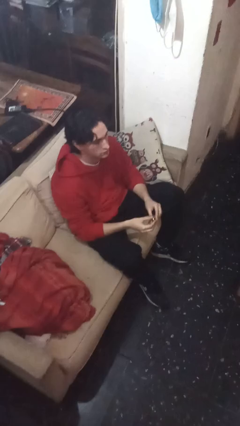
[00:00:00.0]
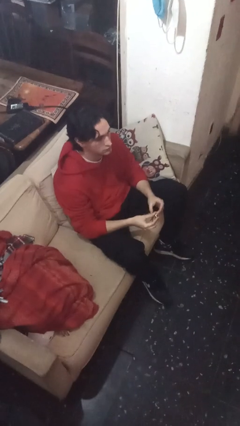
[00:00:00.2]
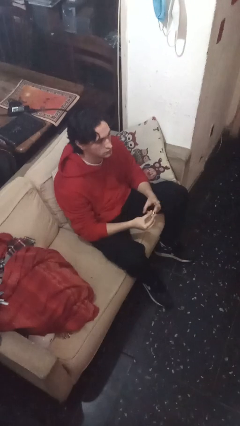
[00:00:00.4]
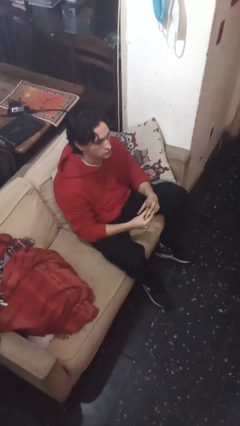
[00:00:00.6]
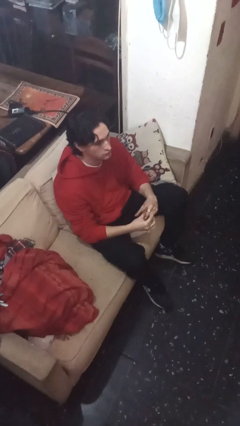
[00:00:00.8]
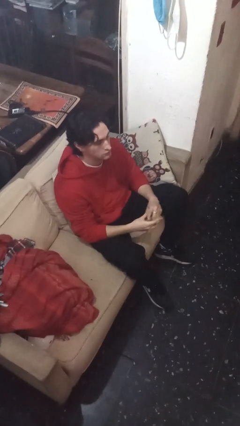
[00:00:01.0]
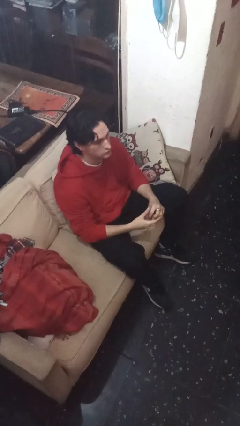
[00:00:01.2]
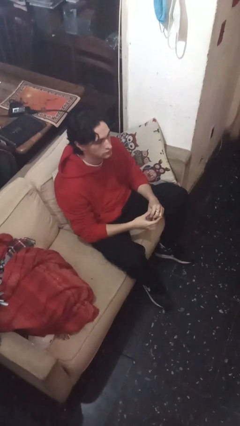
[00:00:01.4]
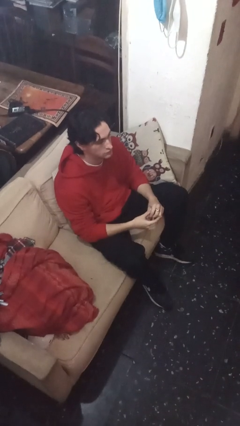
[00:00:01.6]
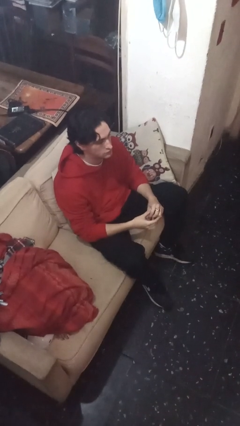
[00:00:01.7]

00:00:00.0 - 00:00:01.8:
person puts on ring

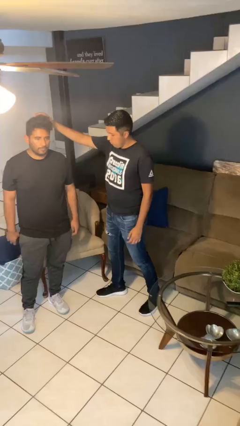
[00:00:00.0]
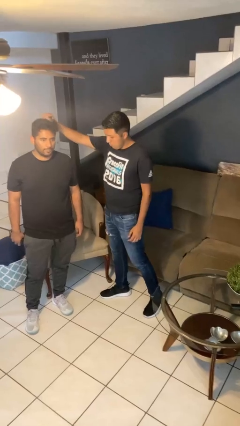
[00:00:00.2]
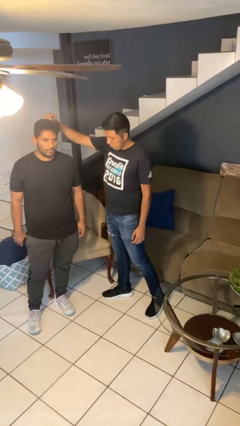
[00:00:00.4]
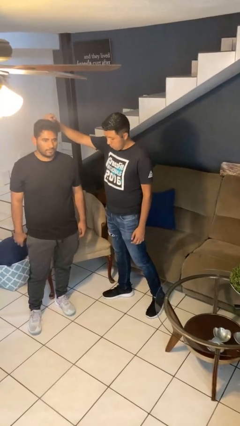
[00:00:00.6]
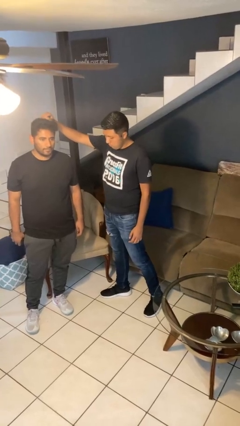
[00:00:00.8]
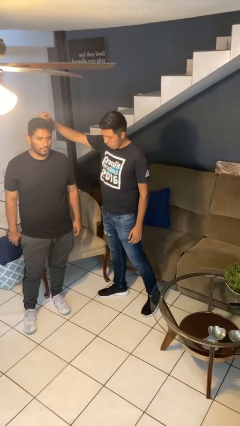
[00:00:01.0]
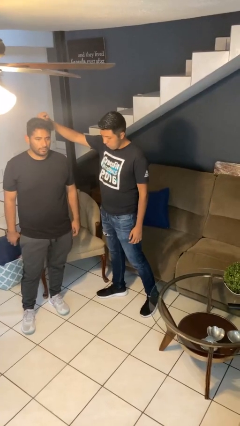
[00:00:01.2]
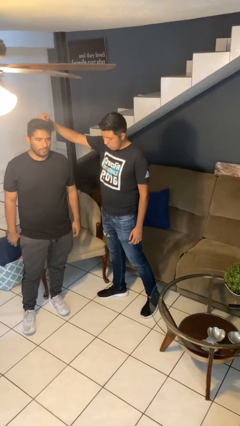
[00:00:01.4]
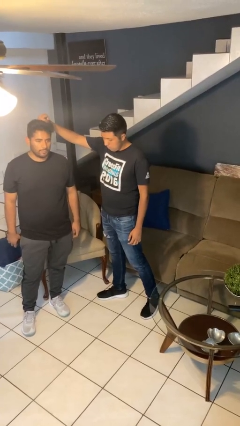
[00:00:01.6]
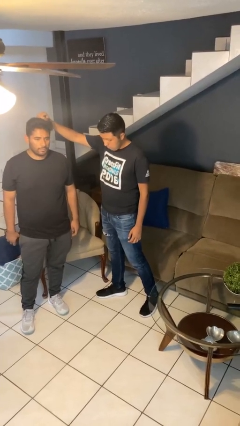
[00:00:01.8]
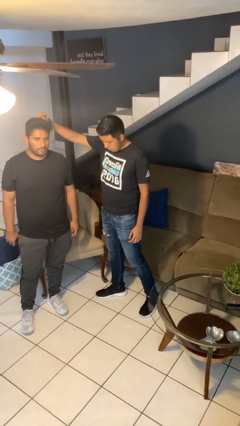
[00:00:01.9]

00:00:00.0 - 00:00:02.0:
person grabs person by hair

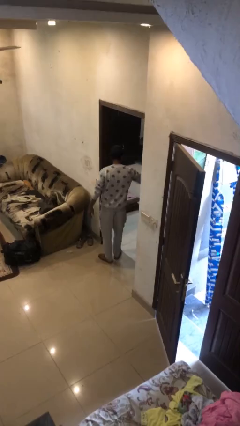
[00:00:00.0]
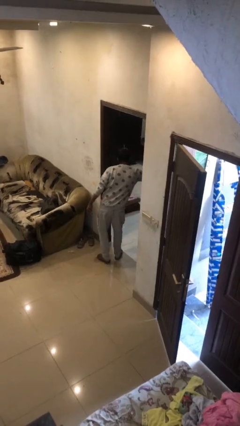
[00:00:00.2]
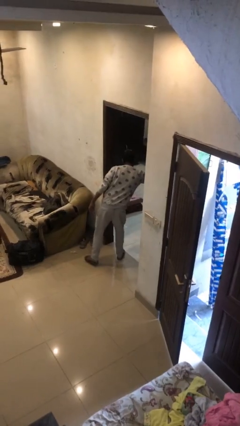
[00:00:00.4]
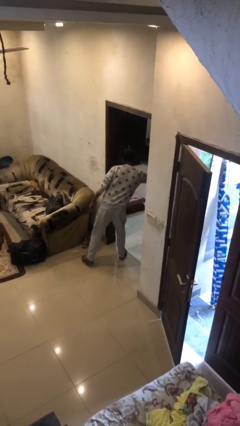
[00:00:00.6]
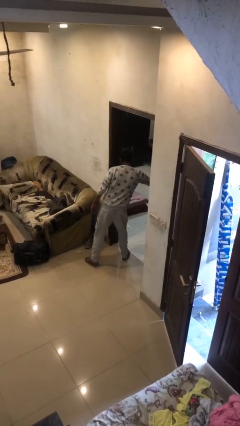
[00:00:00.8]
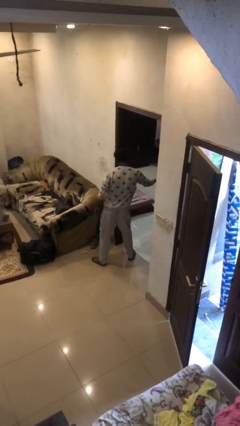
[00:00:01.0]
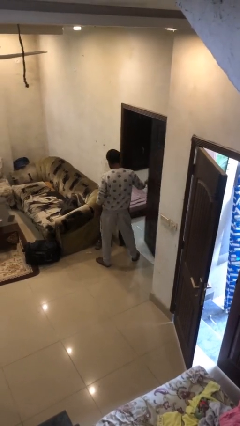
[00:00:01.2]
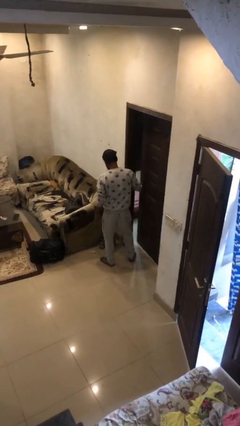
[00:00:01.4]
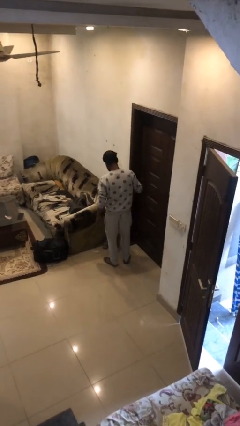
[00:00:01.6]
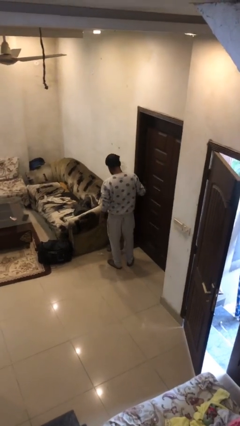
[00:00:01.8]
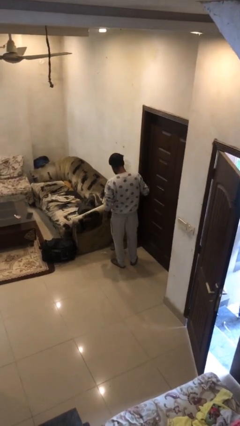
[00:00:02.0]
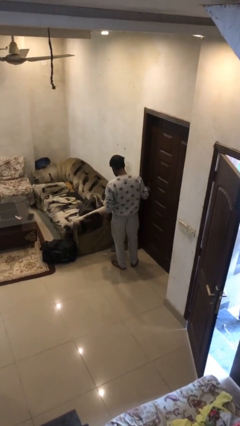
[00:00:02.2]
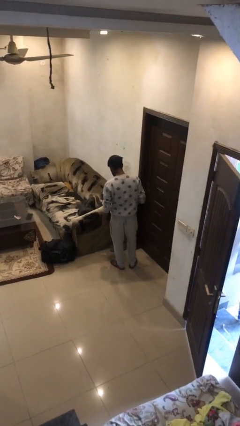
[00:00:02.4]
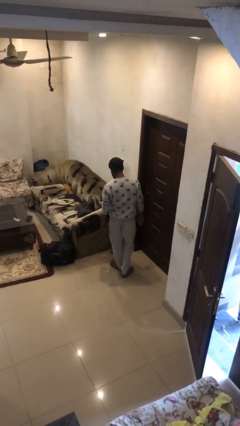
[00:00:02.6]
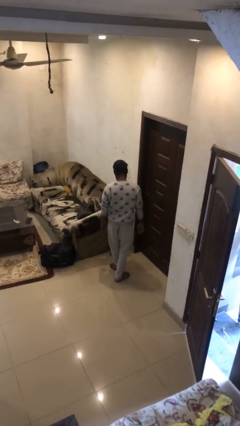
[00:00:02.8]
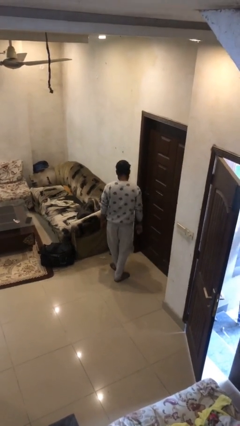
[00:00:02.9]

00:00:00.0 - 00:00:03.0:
person closes facility door

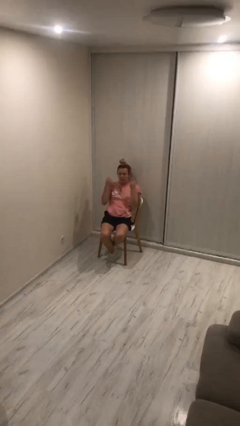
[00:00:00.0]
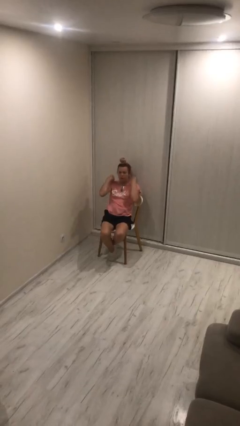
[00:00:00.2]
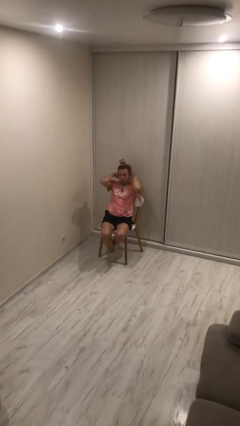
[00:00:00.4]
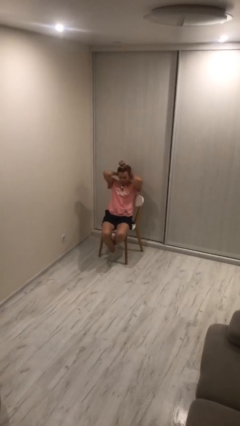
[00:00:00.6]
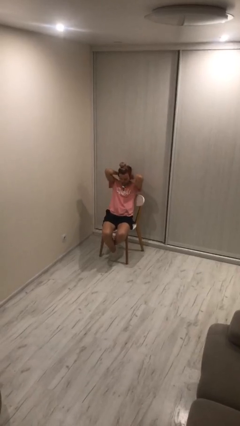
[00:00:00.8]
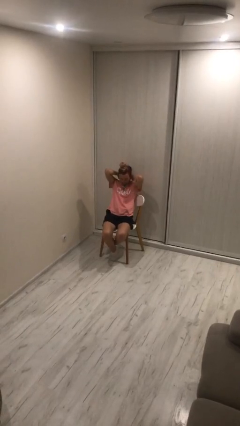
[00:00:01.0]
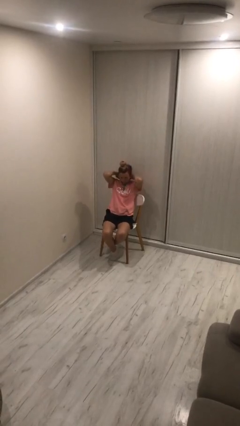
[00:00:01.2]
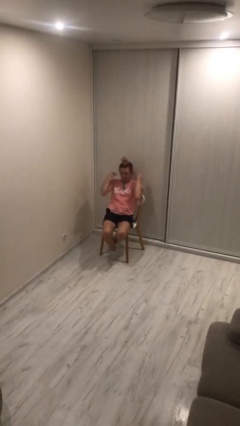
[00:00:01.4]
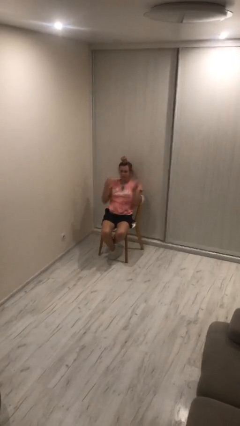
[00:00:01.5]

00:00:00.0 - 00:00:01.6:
person puts on necklace

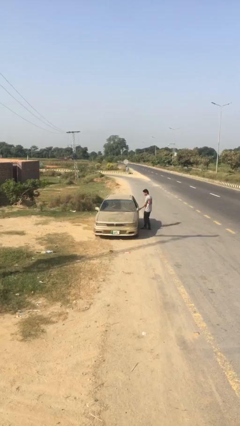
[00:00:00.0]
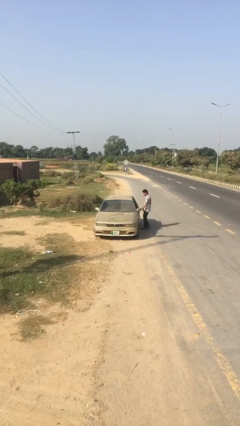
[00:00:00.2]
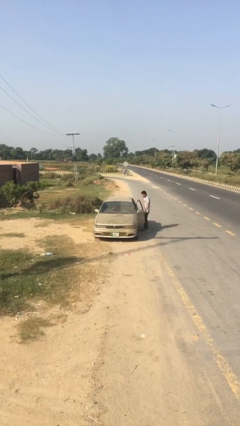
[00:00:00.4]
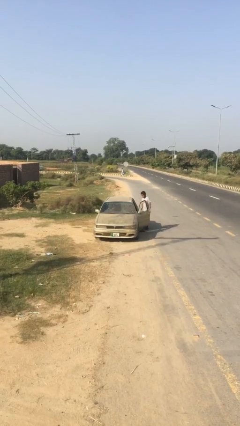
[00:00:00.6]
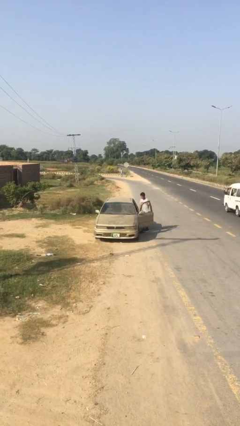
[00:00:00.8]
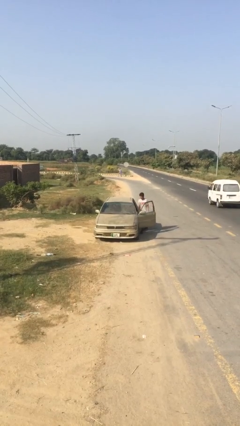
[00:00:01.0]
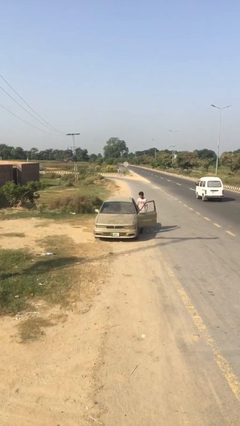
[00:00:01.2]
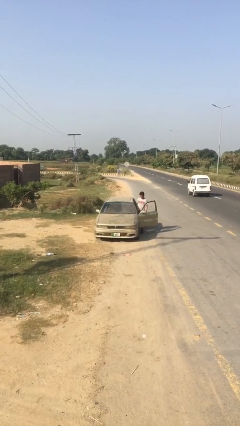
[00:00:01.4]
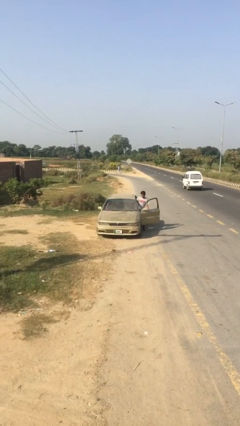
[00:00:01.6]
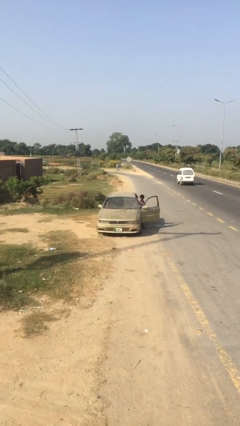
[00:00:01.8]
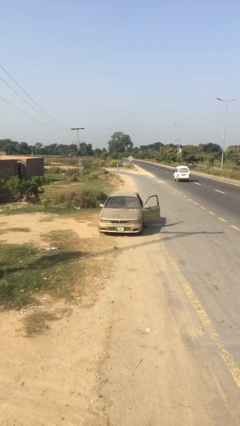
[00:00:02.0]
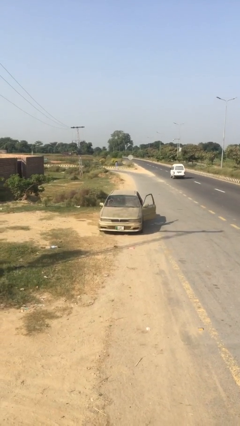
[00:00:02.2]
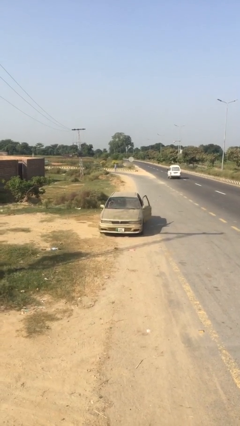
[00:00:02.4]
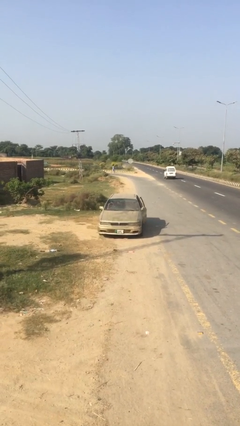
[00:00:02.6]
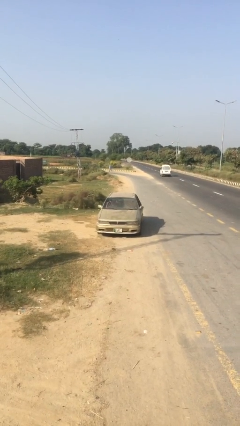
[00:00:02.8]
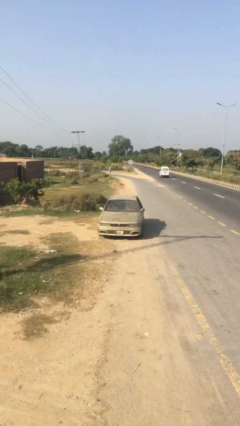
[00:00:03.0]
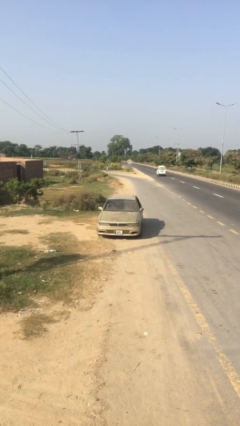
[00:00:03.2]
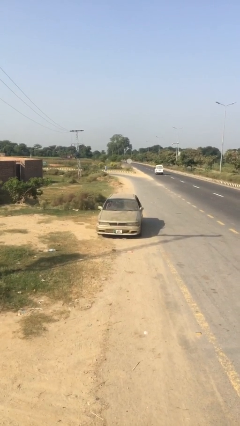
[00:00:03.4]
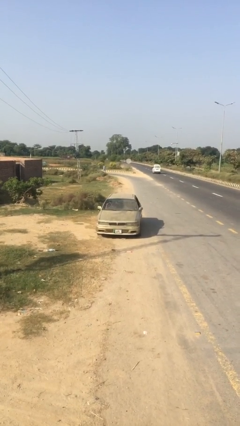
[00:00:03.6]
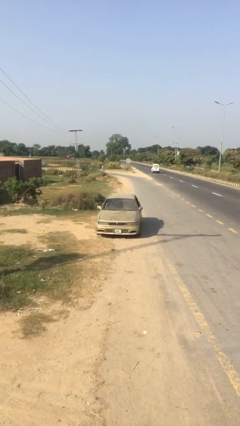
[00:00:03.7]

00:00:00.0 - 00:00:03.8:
car picks up person

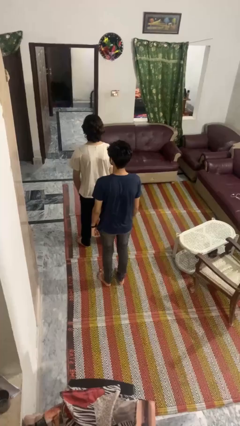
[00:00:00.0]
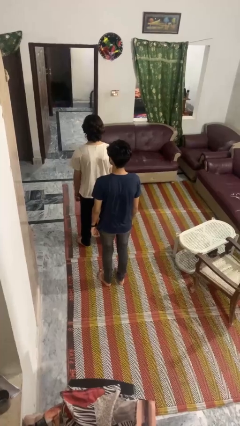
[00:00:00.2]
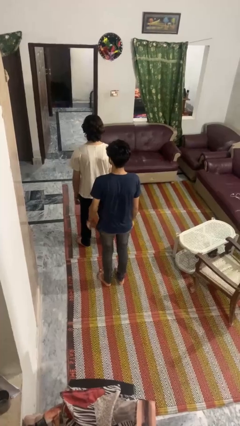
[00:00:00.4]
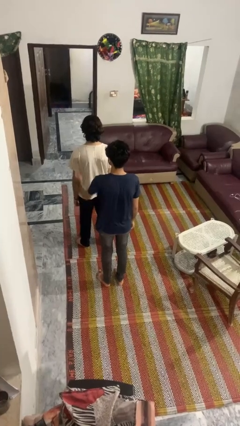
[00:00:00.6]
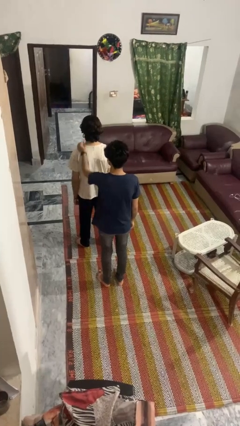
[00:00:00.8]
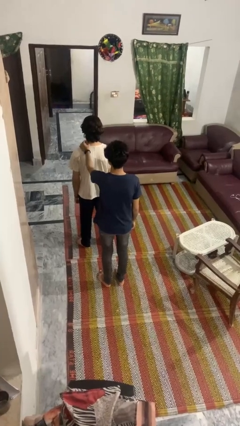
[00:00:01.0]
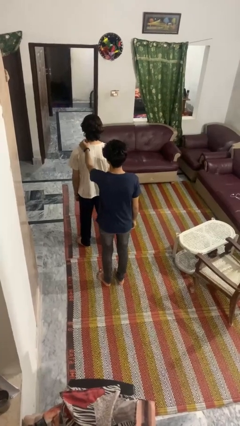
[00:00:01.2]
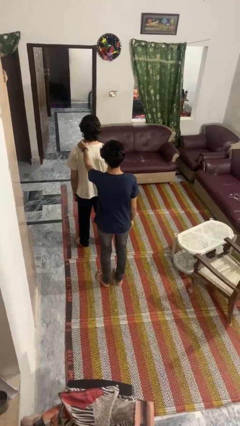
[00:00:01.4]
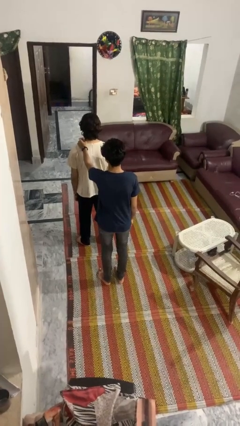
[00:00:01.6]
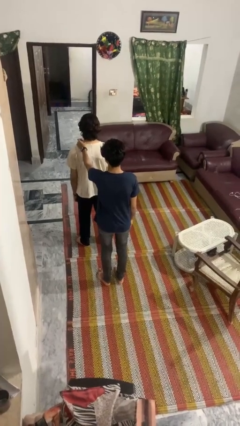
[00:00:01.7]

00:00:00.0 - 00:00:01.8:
person grabs person by shoulder

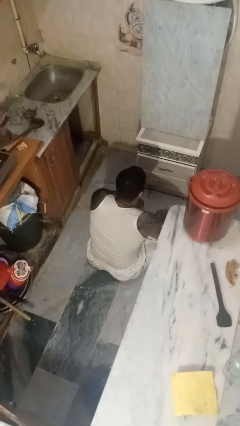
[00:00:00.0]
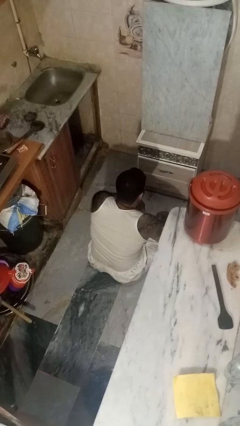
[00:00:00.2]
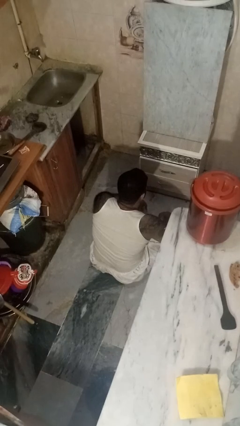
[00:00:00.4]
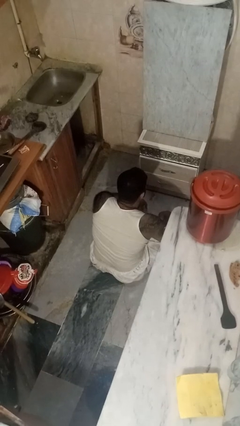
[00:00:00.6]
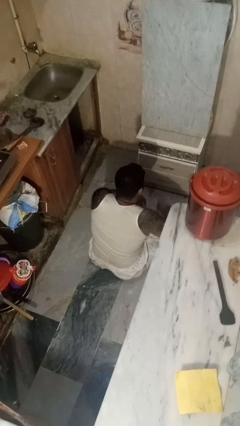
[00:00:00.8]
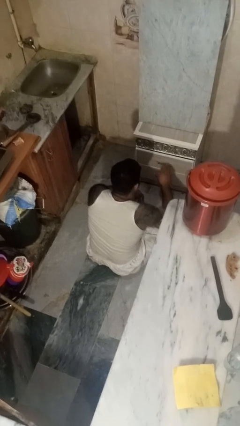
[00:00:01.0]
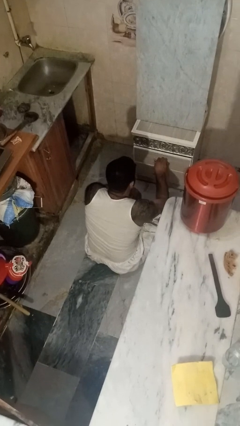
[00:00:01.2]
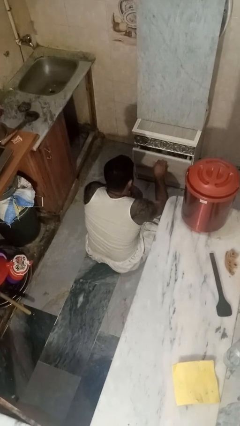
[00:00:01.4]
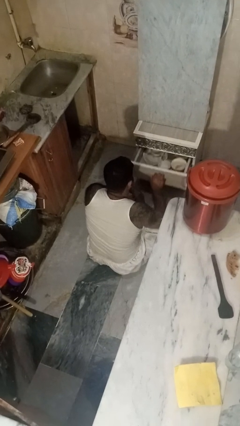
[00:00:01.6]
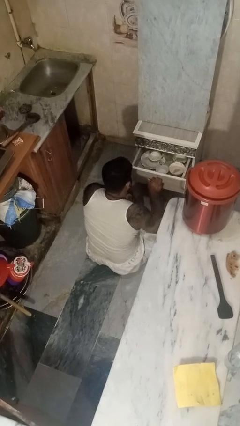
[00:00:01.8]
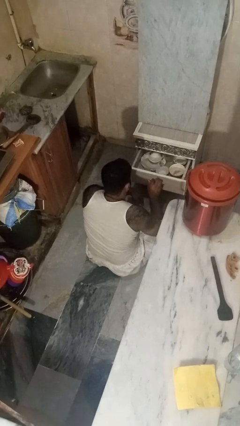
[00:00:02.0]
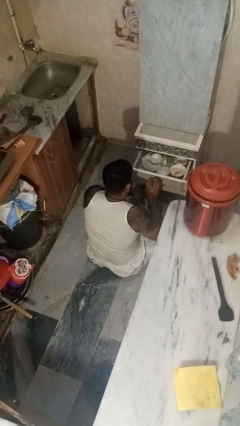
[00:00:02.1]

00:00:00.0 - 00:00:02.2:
person opens kitchen drawer

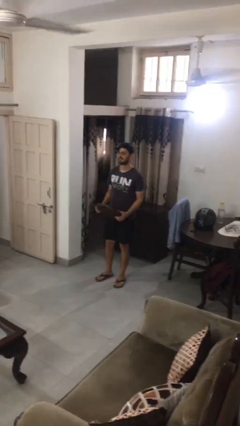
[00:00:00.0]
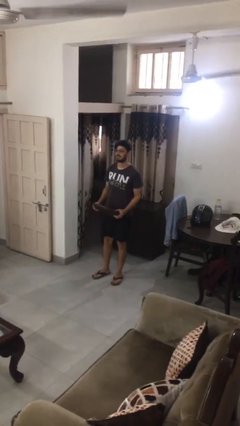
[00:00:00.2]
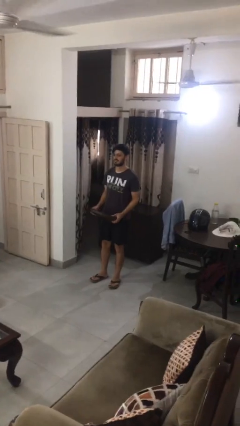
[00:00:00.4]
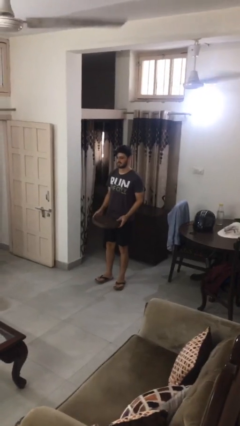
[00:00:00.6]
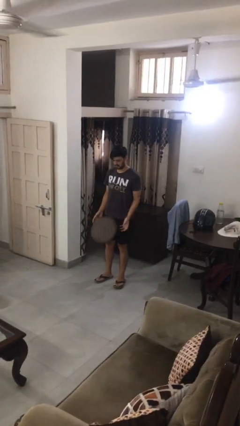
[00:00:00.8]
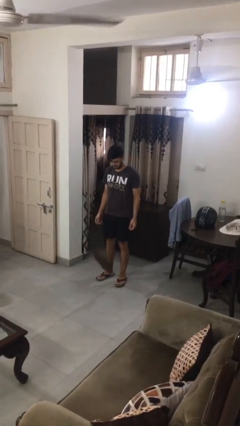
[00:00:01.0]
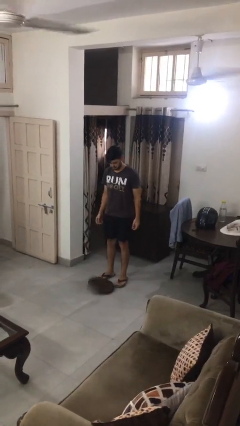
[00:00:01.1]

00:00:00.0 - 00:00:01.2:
person drops object
